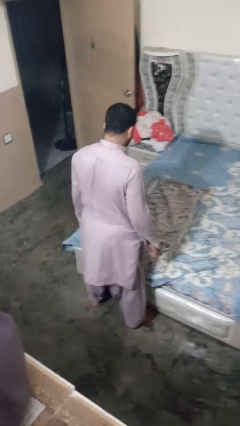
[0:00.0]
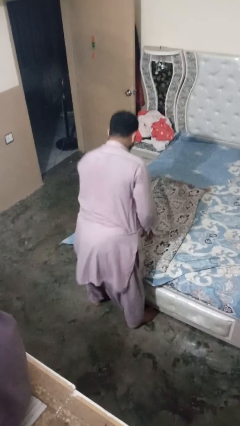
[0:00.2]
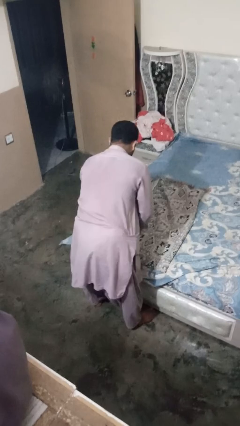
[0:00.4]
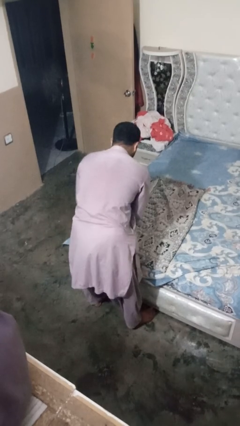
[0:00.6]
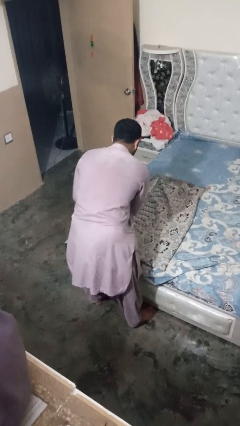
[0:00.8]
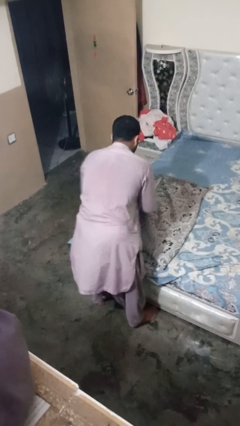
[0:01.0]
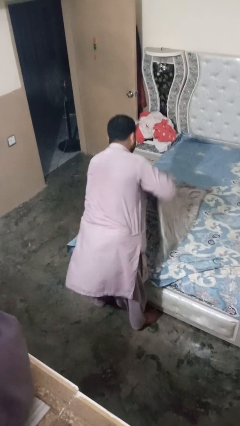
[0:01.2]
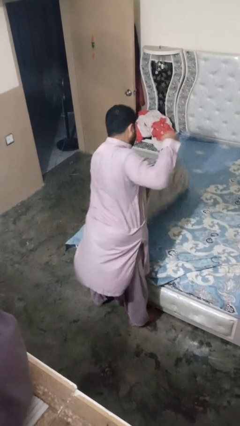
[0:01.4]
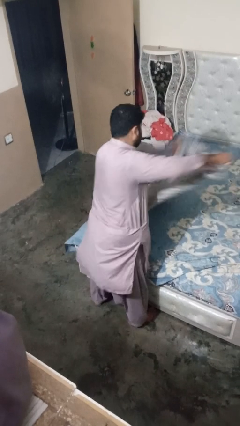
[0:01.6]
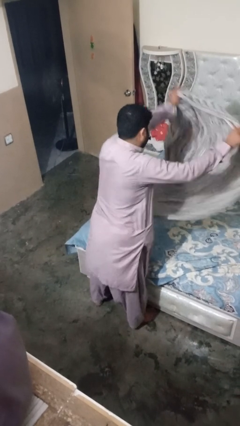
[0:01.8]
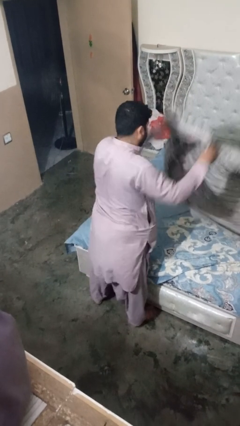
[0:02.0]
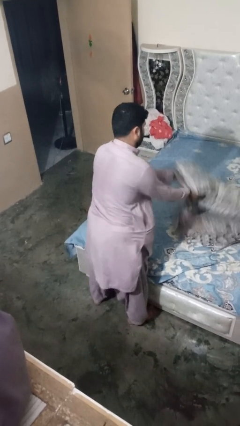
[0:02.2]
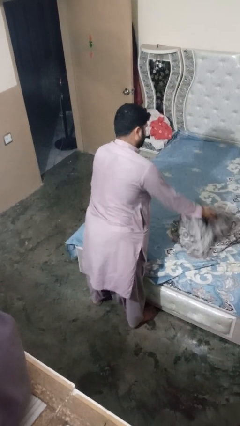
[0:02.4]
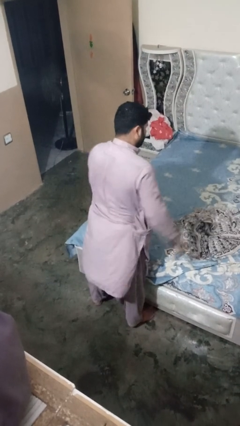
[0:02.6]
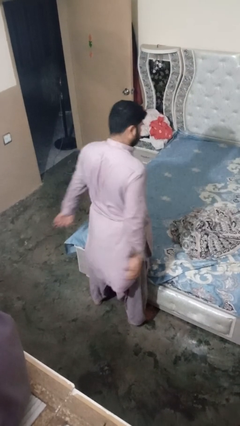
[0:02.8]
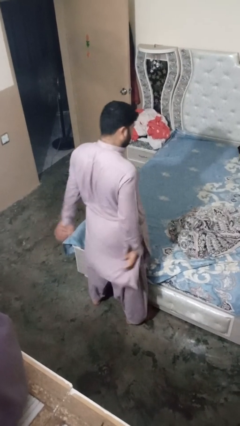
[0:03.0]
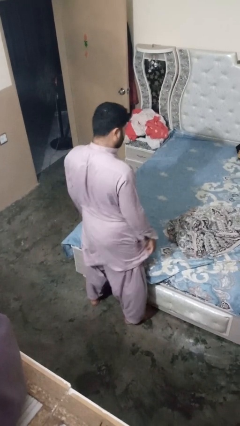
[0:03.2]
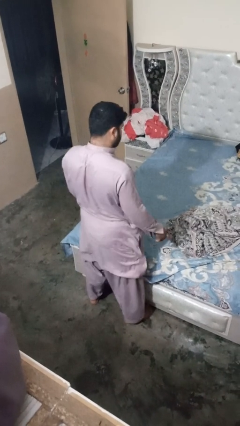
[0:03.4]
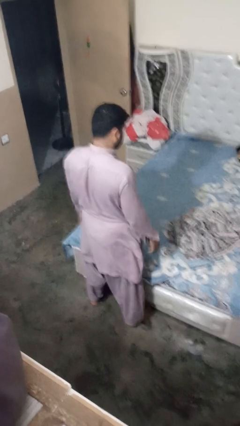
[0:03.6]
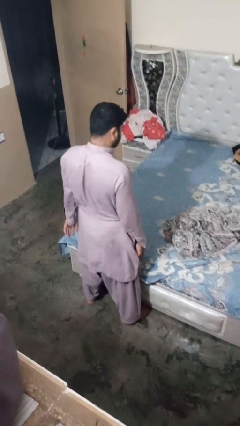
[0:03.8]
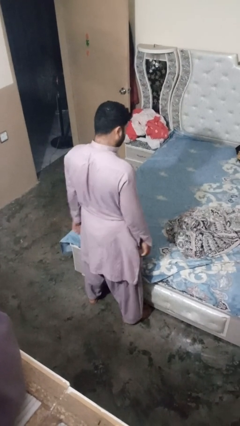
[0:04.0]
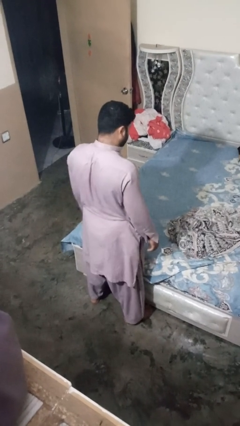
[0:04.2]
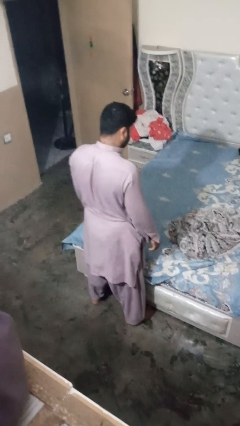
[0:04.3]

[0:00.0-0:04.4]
person unfolds blanket

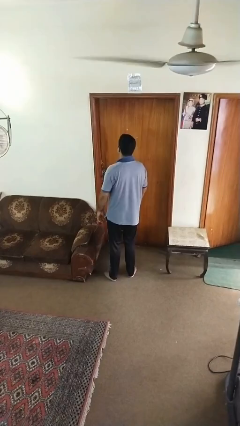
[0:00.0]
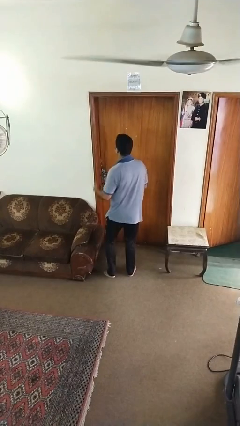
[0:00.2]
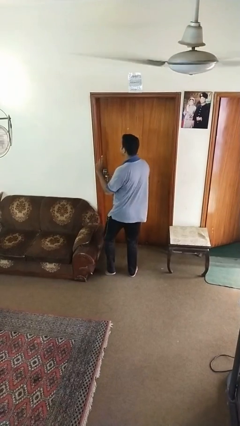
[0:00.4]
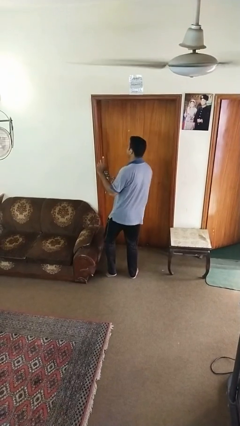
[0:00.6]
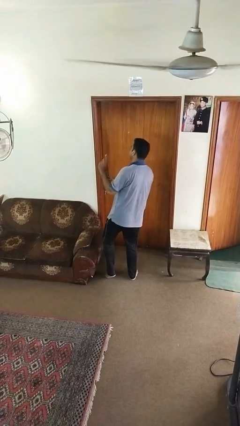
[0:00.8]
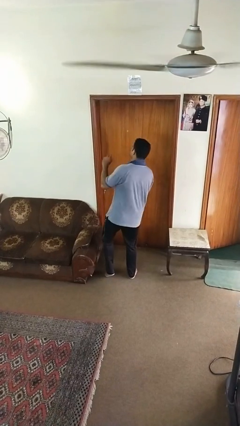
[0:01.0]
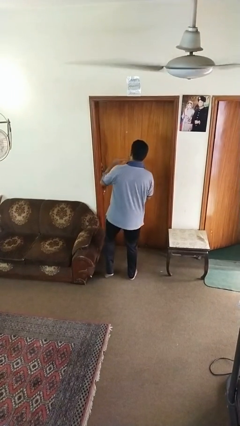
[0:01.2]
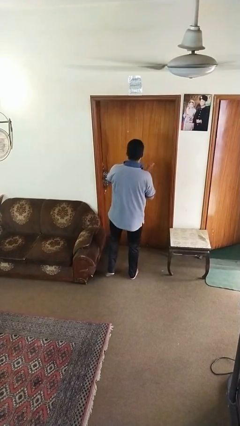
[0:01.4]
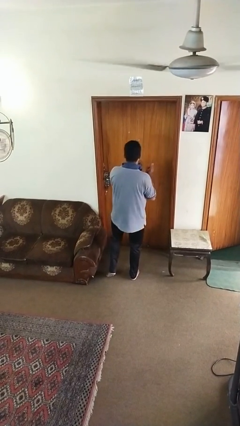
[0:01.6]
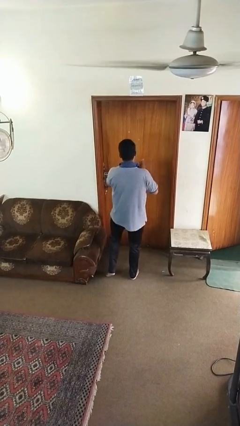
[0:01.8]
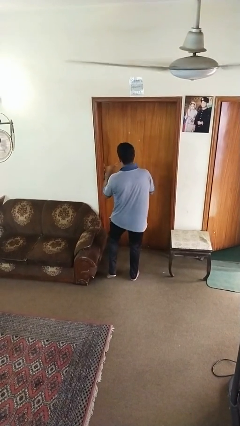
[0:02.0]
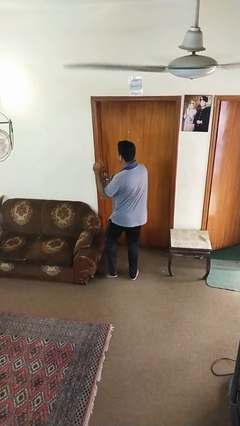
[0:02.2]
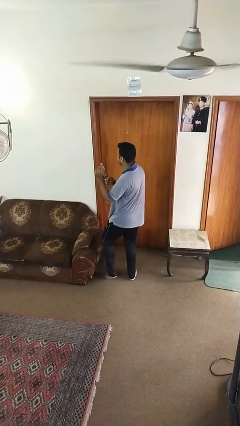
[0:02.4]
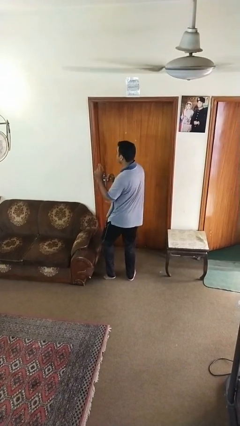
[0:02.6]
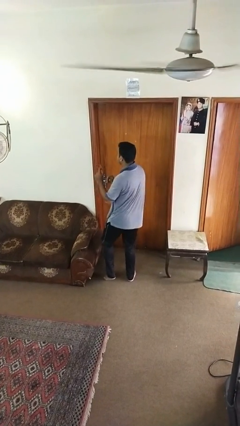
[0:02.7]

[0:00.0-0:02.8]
person dances in place

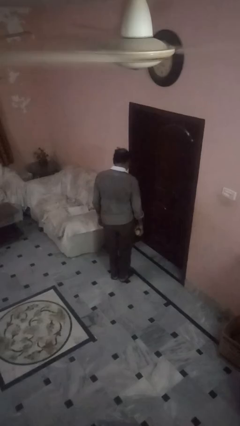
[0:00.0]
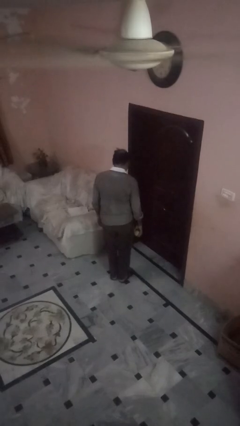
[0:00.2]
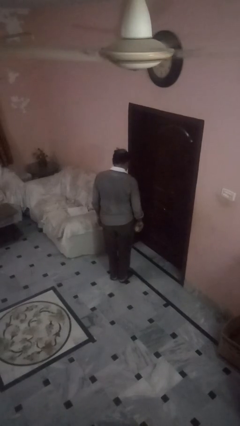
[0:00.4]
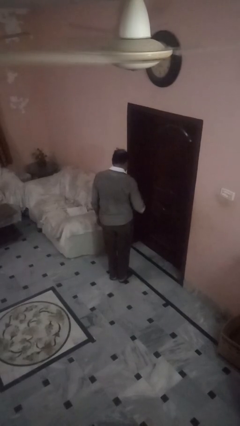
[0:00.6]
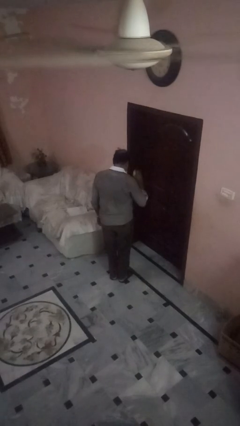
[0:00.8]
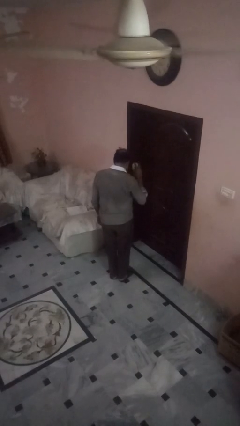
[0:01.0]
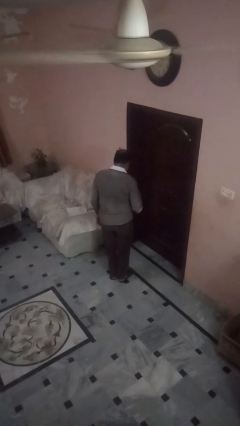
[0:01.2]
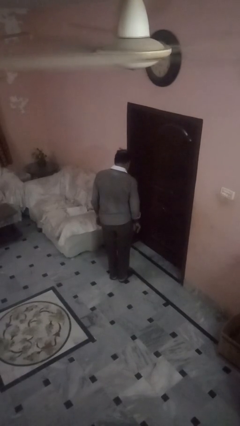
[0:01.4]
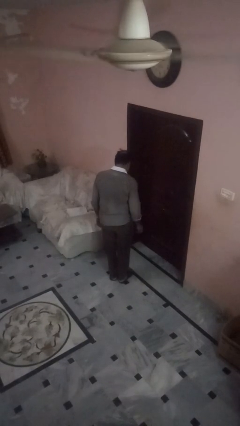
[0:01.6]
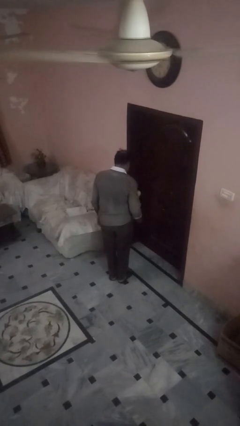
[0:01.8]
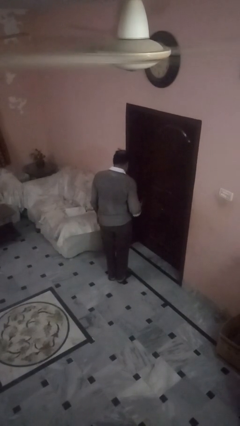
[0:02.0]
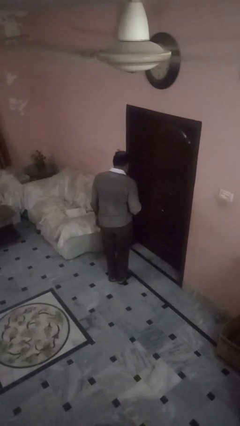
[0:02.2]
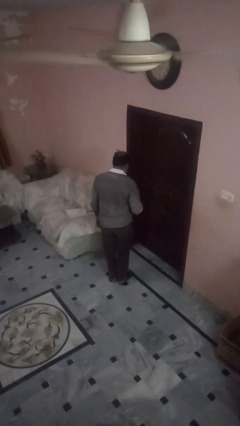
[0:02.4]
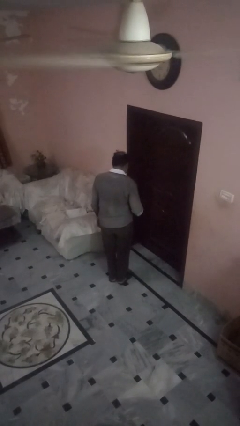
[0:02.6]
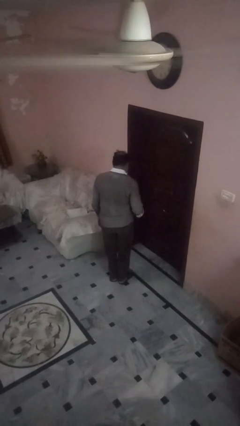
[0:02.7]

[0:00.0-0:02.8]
person bounces ball on floor

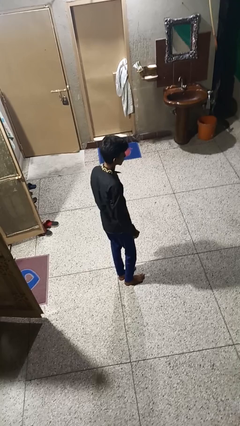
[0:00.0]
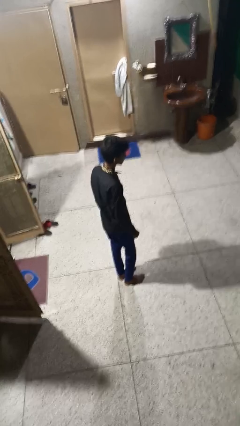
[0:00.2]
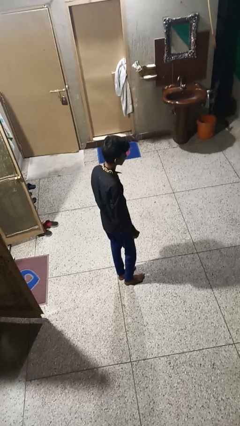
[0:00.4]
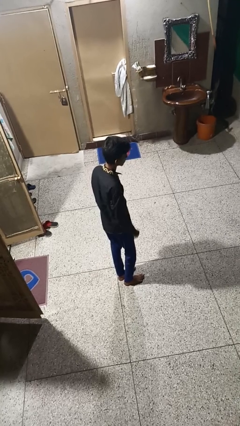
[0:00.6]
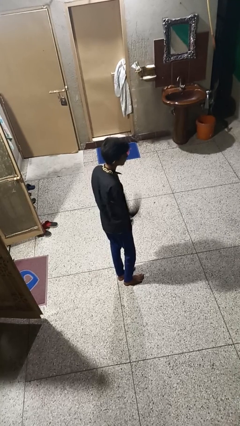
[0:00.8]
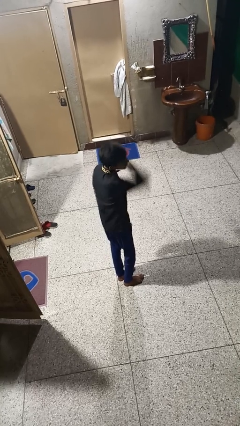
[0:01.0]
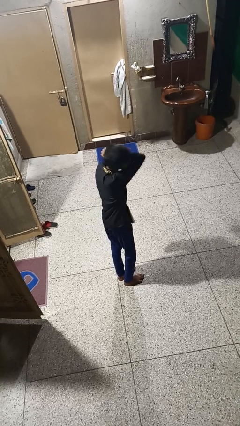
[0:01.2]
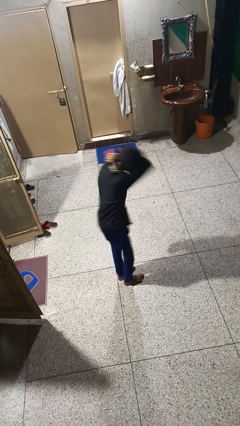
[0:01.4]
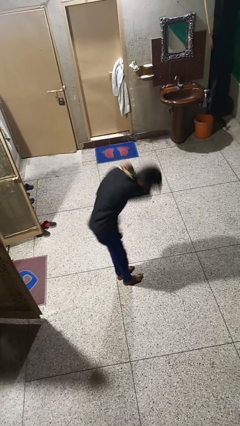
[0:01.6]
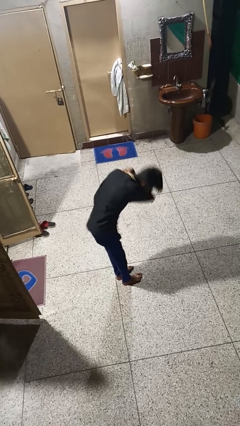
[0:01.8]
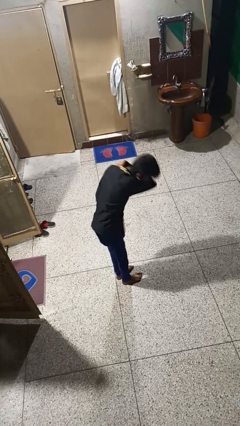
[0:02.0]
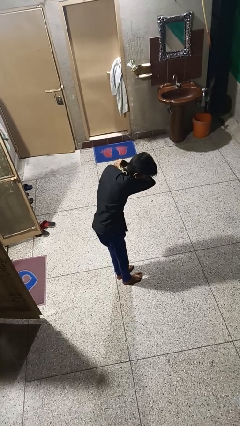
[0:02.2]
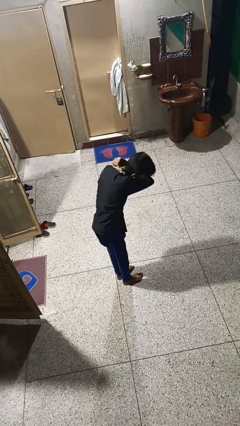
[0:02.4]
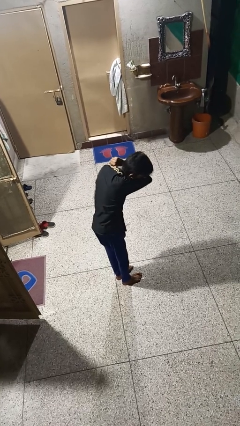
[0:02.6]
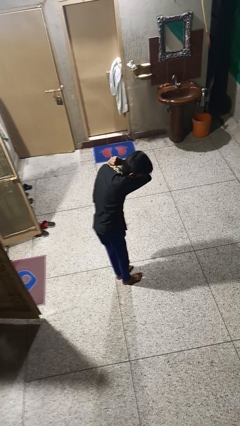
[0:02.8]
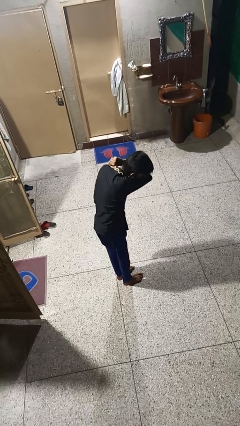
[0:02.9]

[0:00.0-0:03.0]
person sneezes into arm

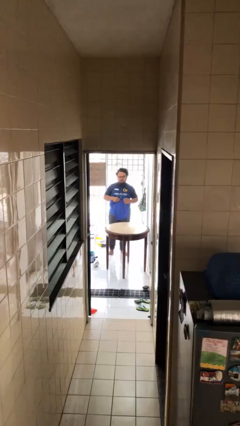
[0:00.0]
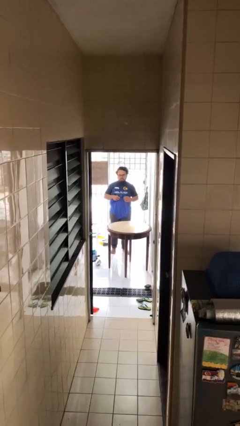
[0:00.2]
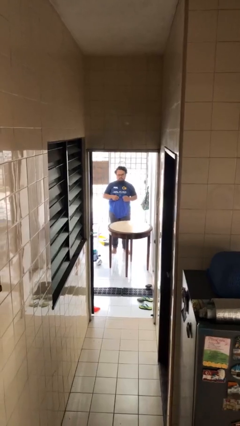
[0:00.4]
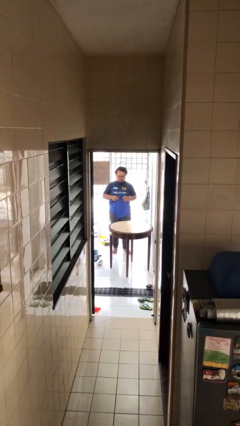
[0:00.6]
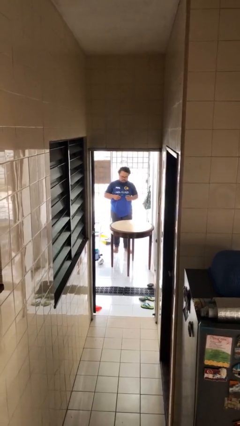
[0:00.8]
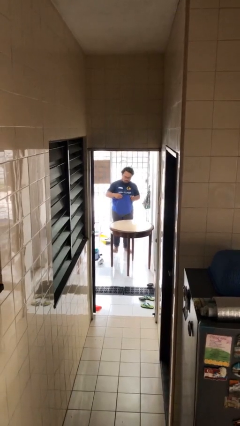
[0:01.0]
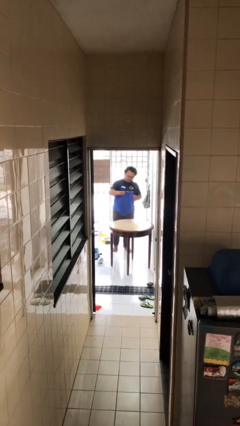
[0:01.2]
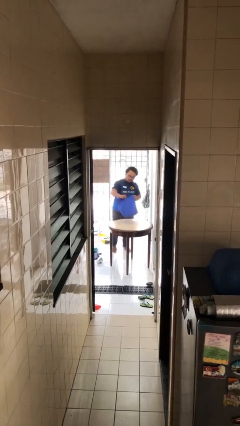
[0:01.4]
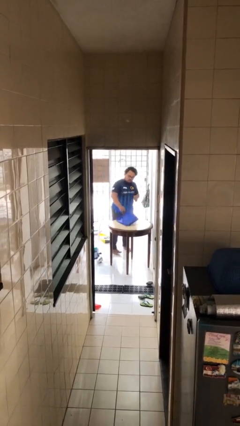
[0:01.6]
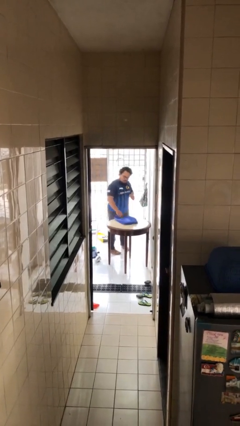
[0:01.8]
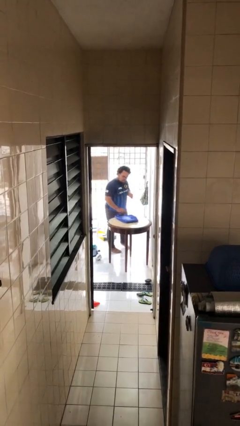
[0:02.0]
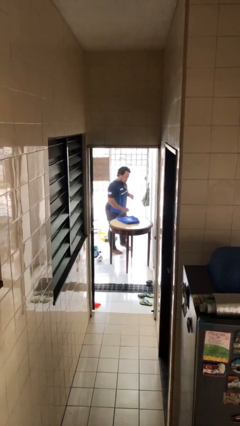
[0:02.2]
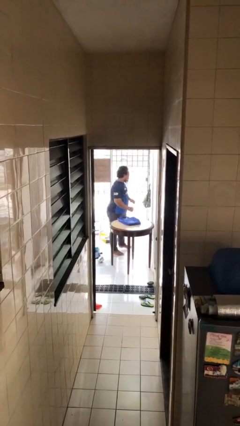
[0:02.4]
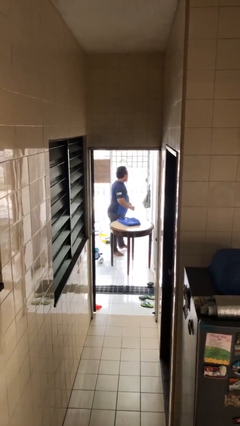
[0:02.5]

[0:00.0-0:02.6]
person puts down object on table

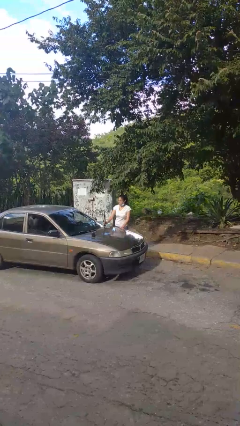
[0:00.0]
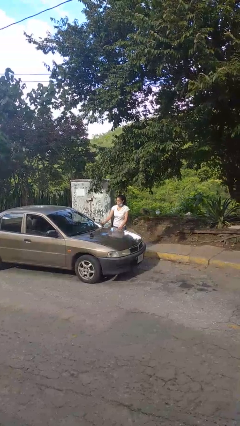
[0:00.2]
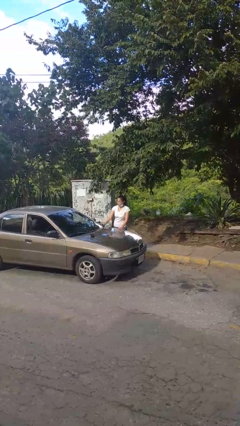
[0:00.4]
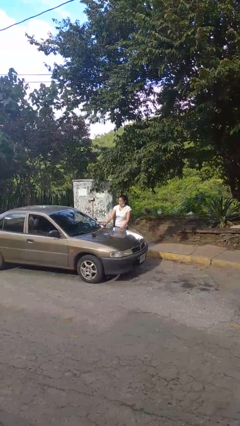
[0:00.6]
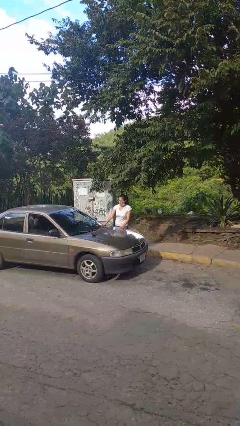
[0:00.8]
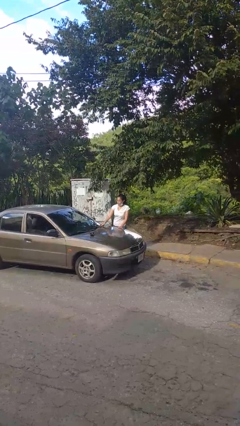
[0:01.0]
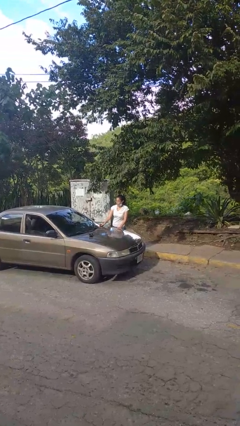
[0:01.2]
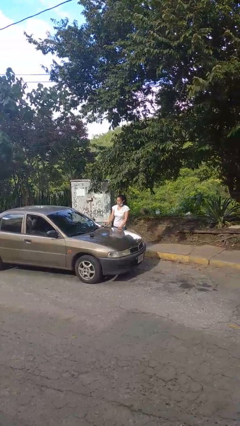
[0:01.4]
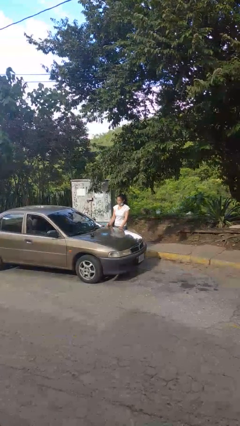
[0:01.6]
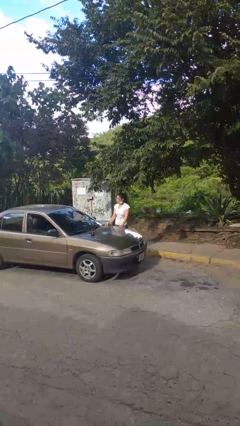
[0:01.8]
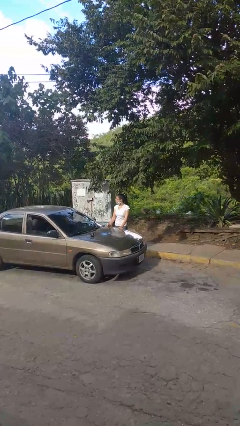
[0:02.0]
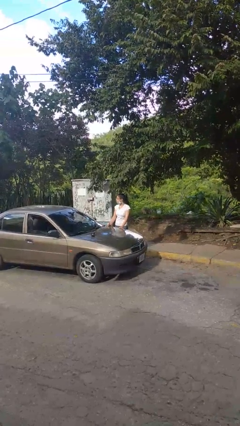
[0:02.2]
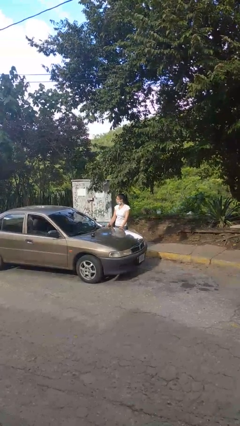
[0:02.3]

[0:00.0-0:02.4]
person flips down car wipers
